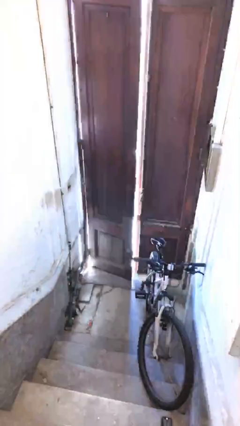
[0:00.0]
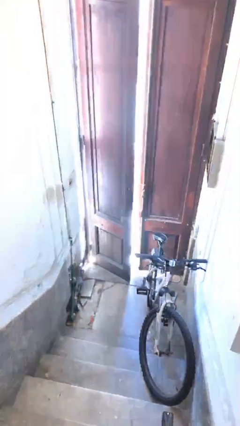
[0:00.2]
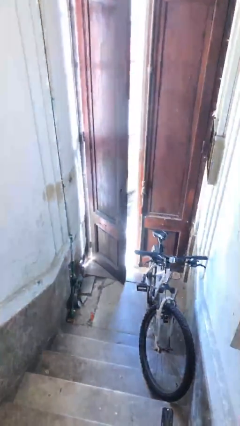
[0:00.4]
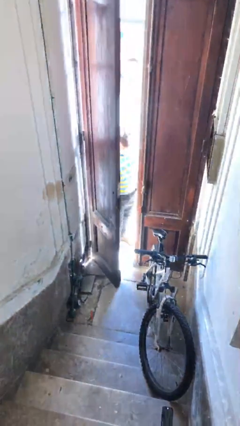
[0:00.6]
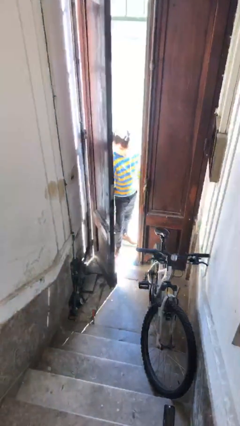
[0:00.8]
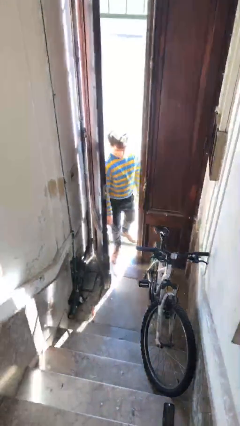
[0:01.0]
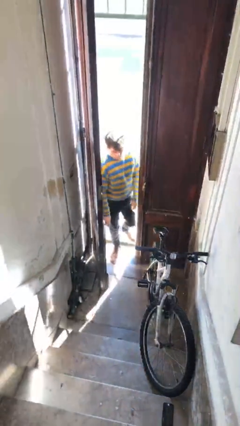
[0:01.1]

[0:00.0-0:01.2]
person opens facility door

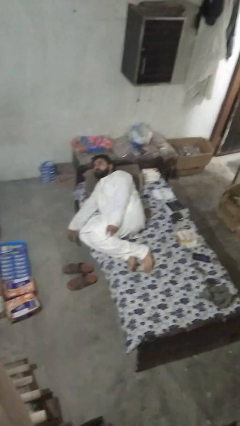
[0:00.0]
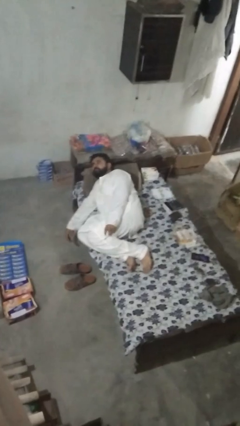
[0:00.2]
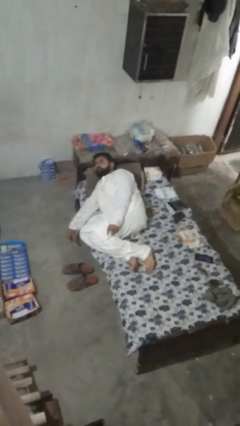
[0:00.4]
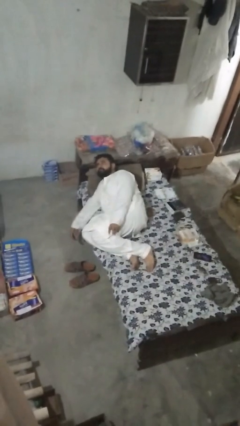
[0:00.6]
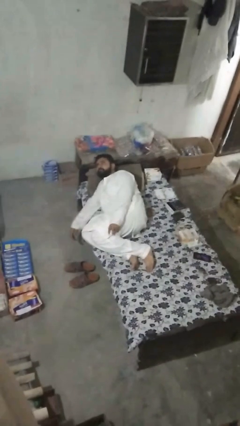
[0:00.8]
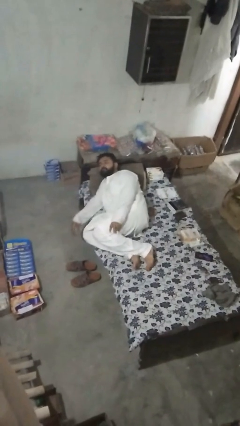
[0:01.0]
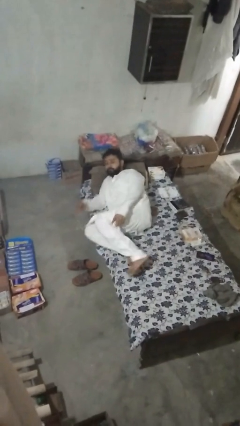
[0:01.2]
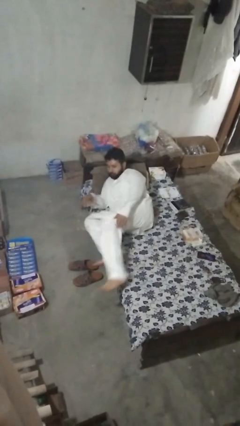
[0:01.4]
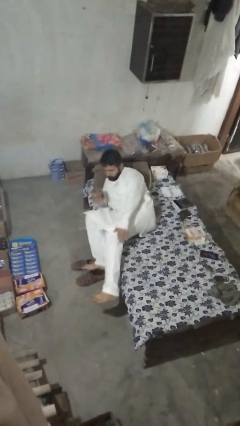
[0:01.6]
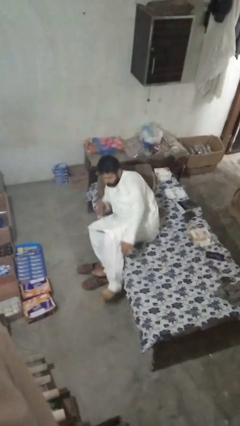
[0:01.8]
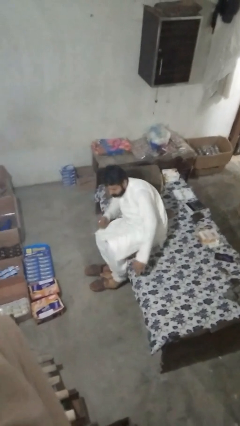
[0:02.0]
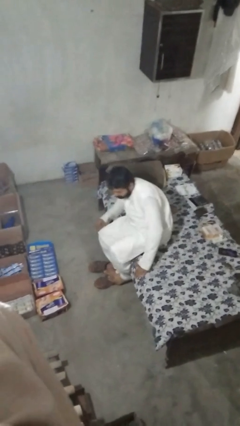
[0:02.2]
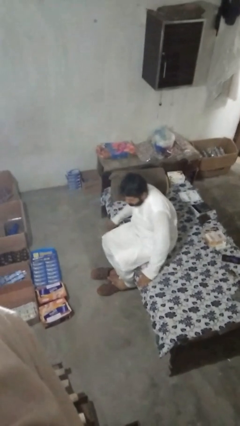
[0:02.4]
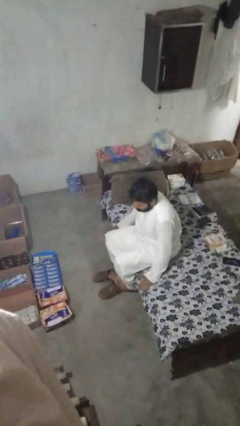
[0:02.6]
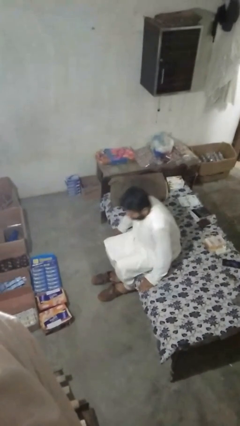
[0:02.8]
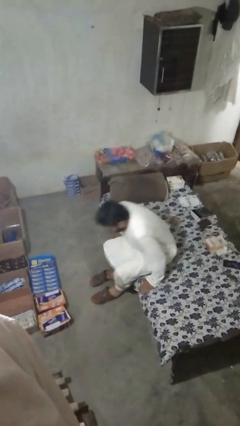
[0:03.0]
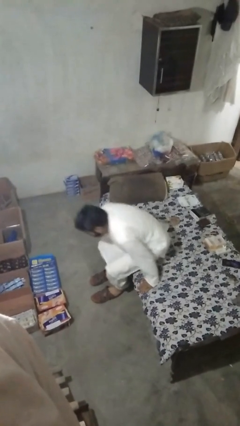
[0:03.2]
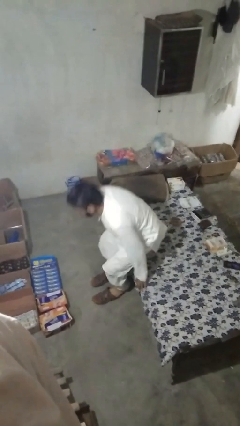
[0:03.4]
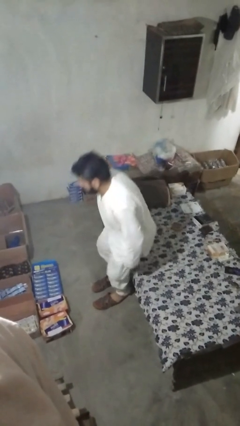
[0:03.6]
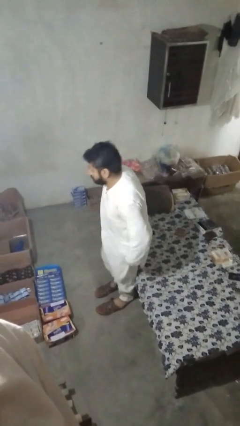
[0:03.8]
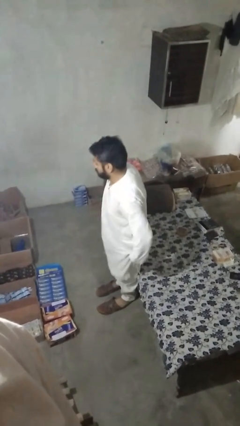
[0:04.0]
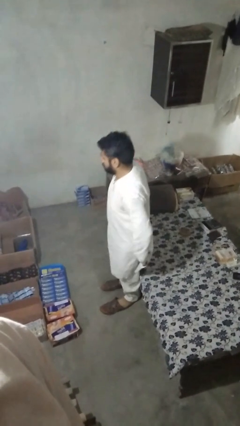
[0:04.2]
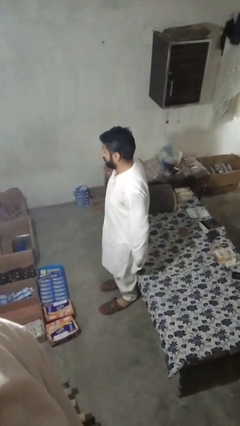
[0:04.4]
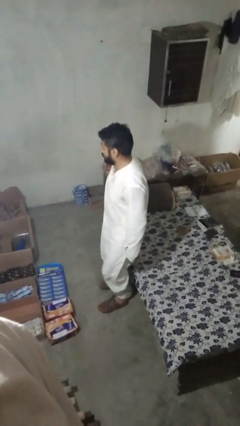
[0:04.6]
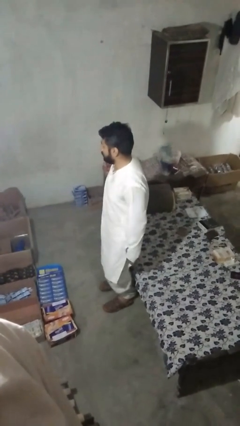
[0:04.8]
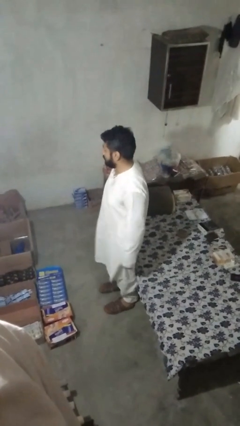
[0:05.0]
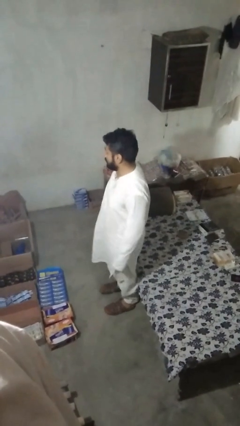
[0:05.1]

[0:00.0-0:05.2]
person stands up

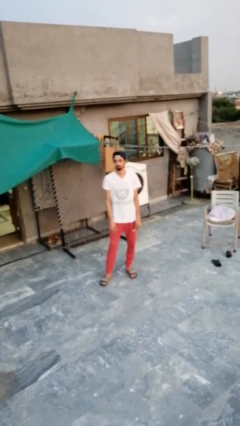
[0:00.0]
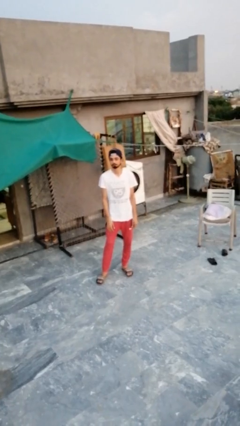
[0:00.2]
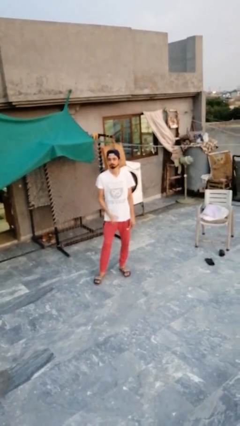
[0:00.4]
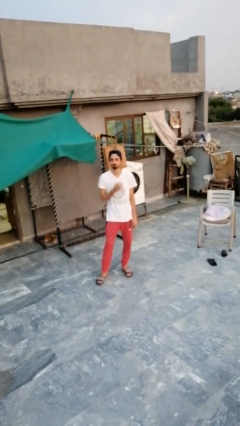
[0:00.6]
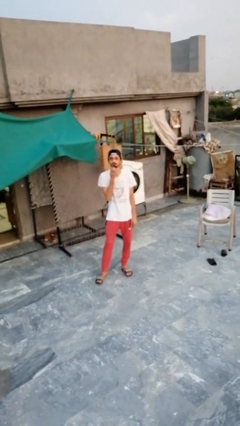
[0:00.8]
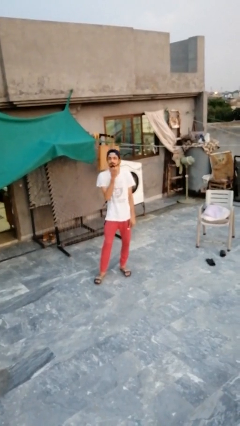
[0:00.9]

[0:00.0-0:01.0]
person strokes chin

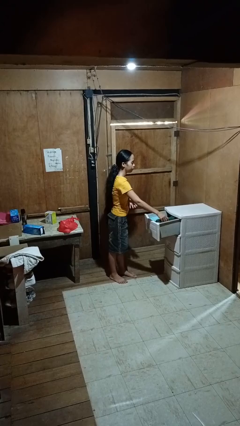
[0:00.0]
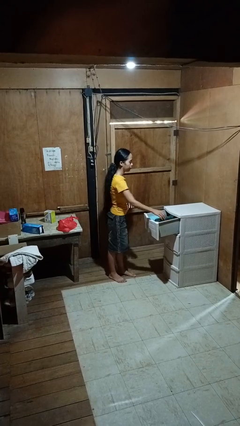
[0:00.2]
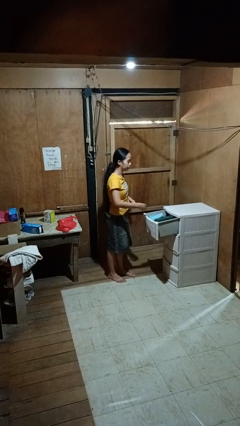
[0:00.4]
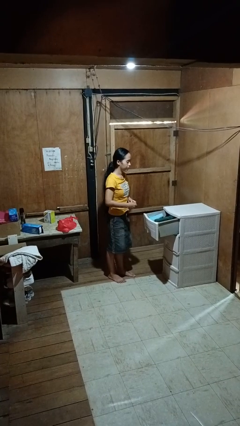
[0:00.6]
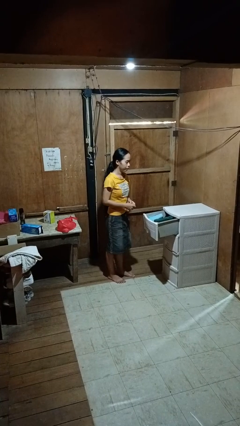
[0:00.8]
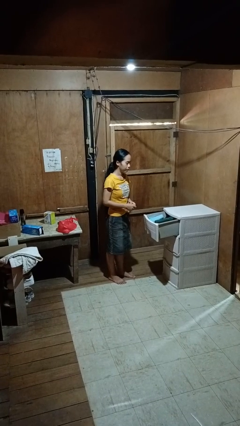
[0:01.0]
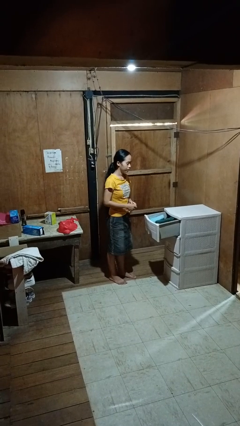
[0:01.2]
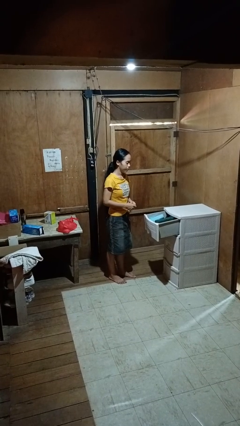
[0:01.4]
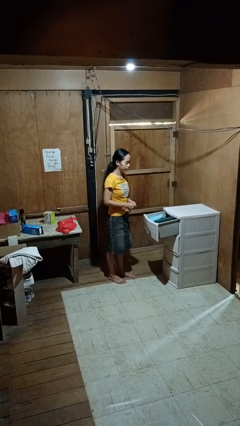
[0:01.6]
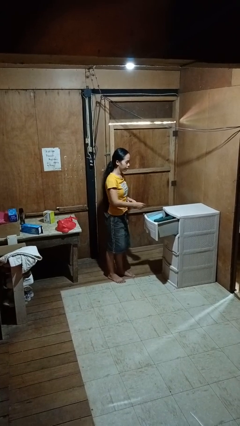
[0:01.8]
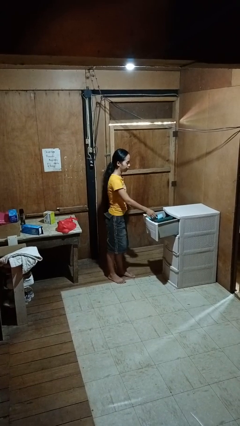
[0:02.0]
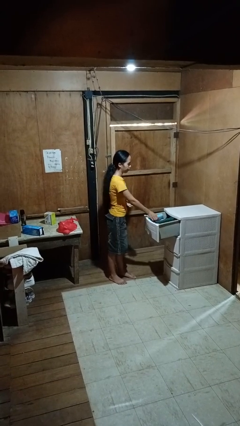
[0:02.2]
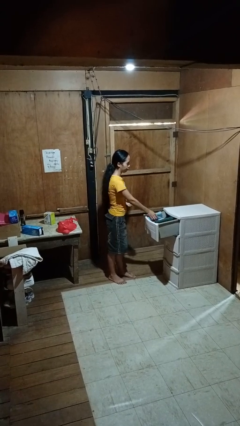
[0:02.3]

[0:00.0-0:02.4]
person puts clothes into dresser

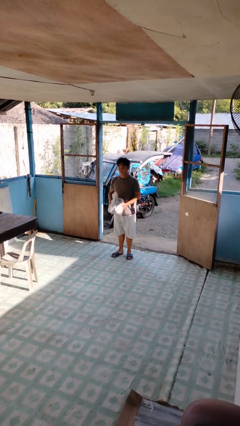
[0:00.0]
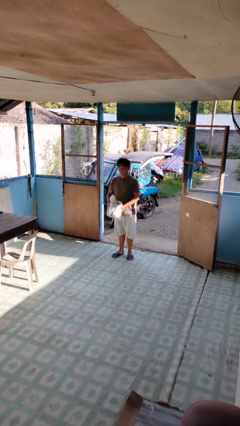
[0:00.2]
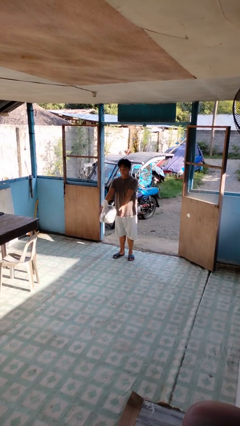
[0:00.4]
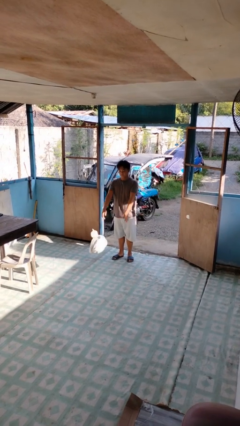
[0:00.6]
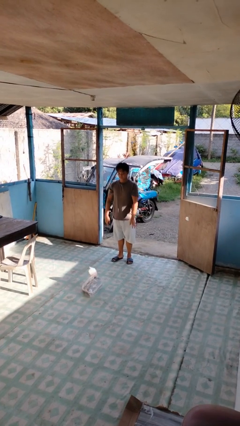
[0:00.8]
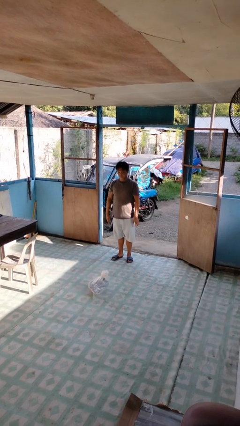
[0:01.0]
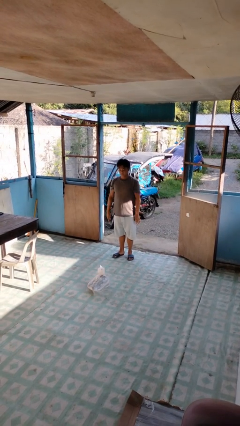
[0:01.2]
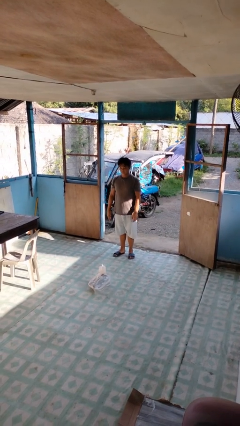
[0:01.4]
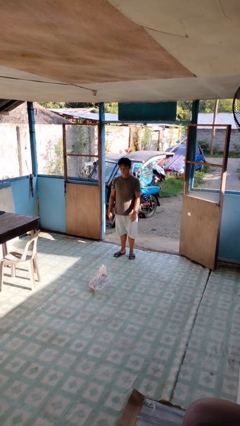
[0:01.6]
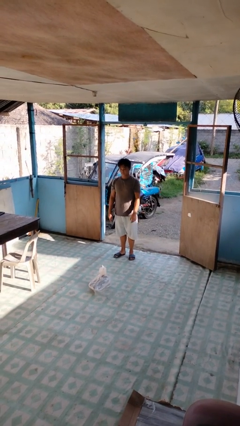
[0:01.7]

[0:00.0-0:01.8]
person throws object to ground

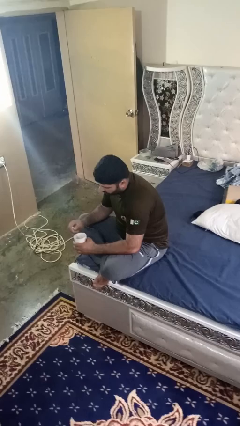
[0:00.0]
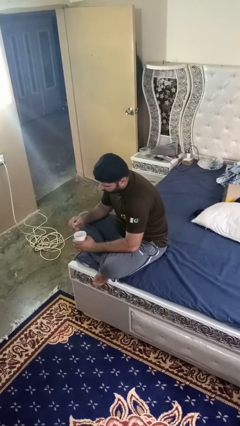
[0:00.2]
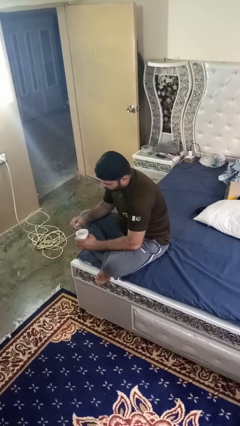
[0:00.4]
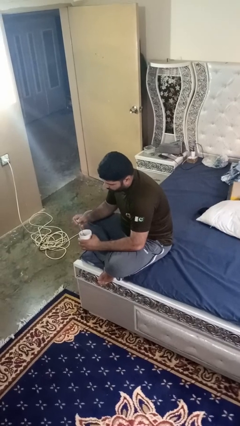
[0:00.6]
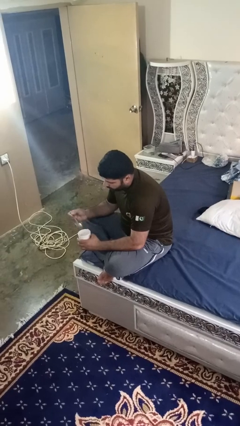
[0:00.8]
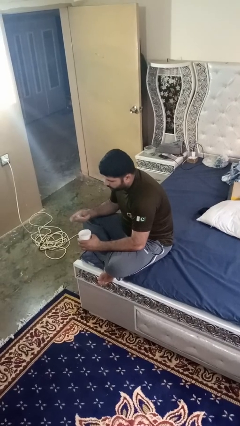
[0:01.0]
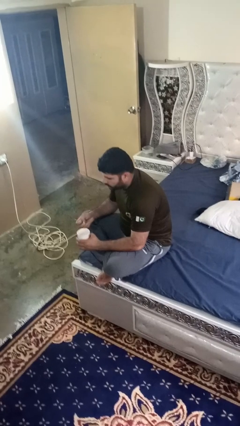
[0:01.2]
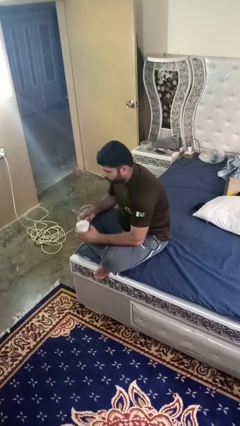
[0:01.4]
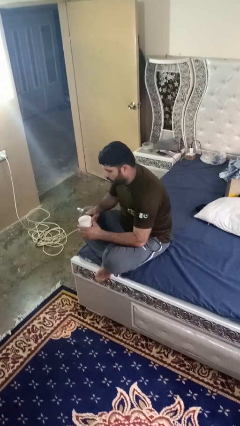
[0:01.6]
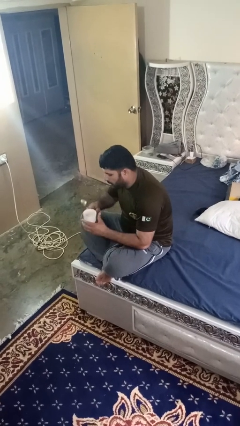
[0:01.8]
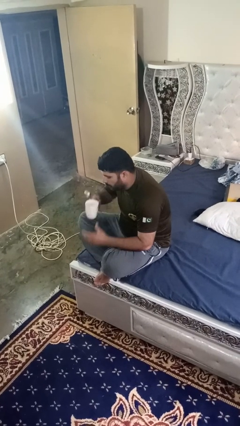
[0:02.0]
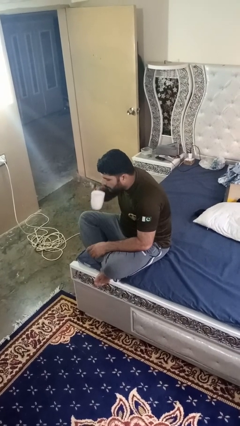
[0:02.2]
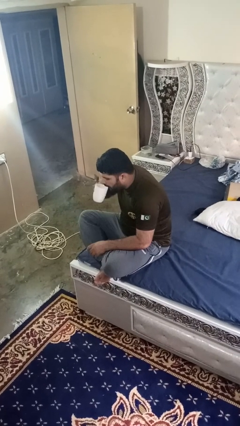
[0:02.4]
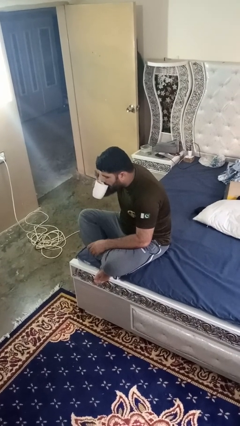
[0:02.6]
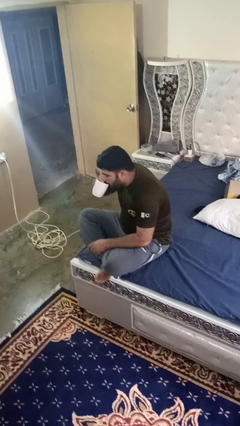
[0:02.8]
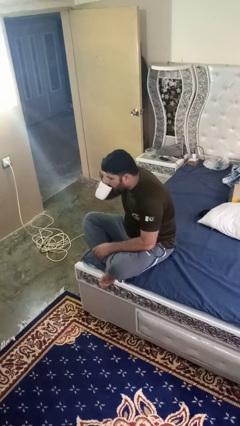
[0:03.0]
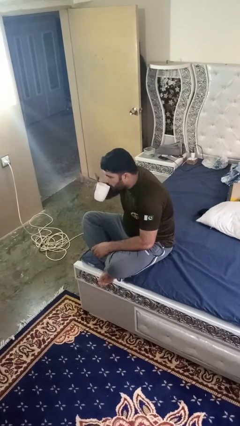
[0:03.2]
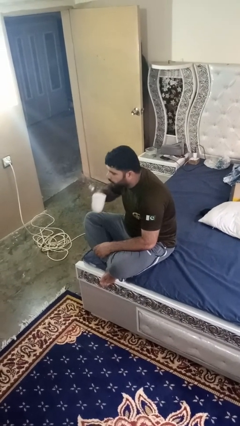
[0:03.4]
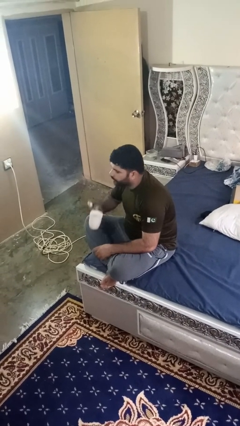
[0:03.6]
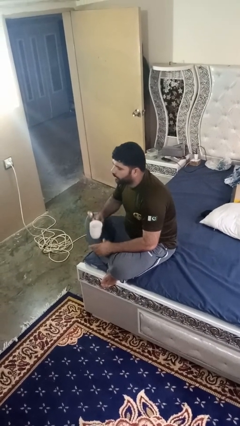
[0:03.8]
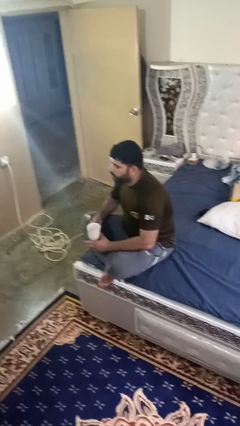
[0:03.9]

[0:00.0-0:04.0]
person drinks from mug

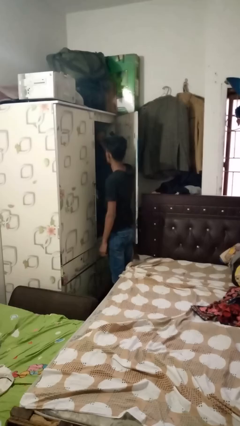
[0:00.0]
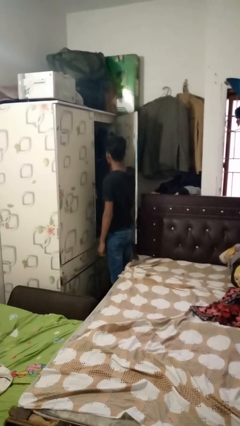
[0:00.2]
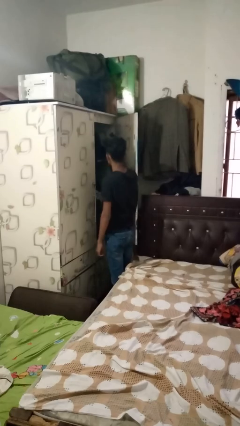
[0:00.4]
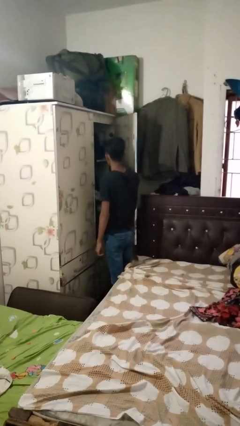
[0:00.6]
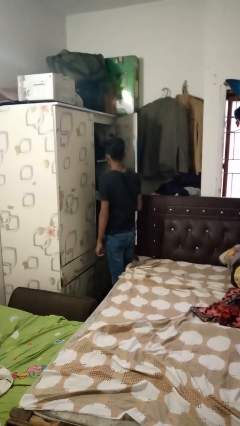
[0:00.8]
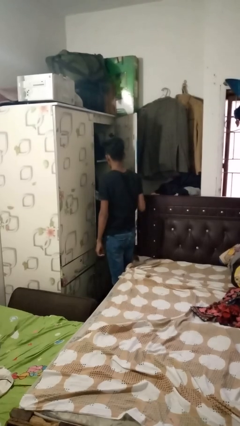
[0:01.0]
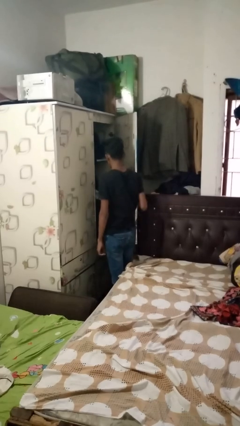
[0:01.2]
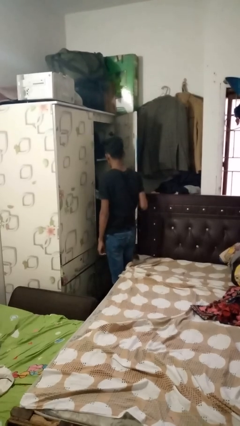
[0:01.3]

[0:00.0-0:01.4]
person takes clothes from closet

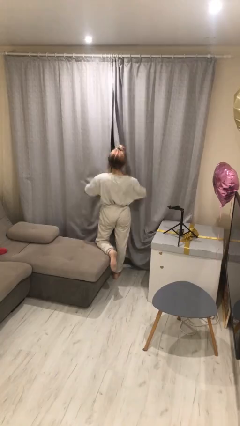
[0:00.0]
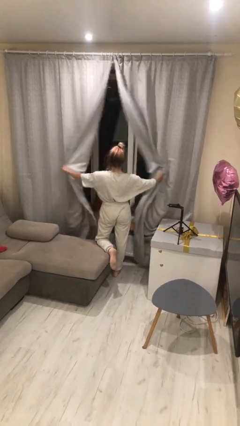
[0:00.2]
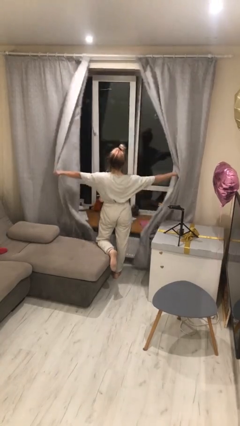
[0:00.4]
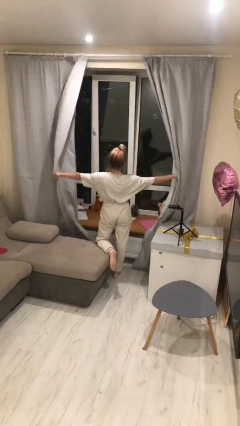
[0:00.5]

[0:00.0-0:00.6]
person opens curtains
